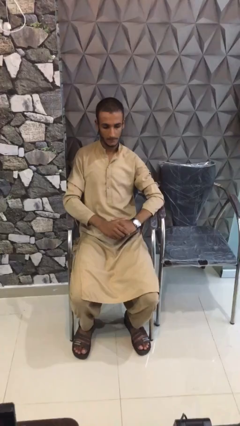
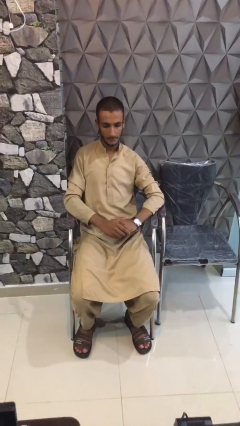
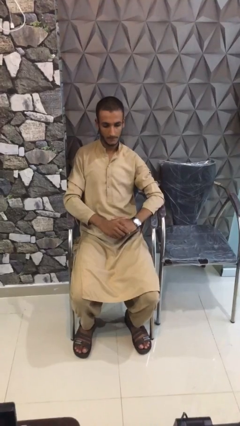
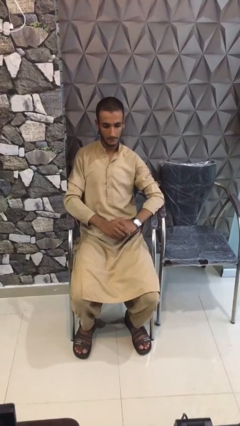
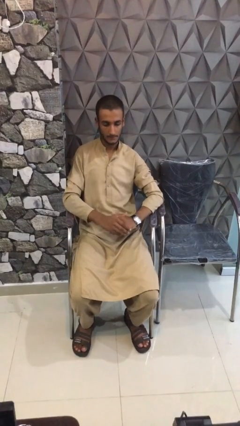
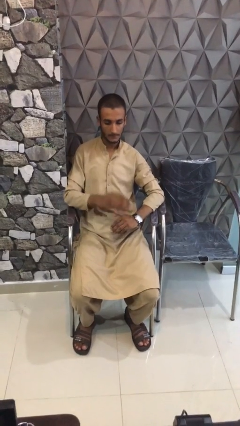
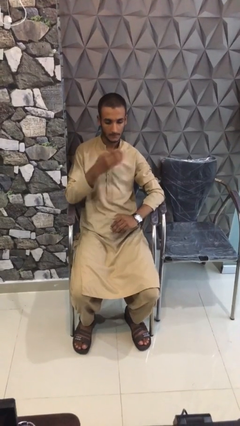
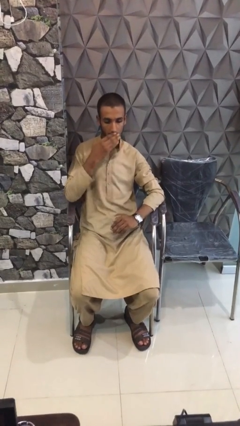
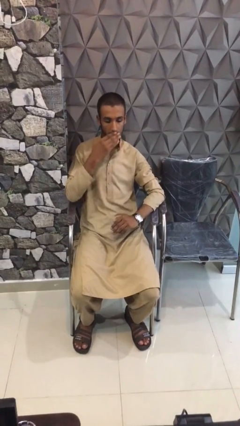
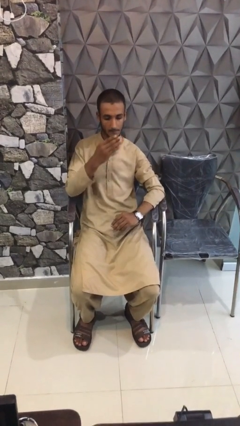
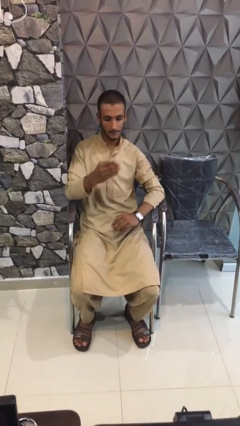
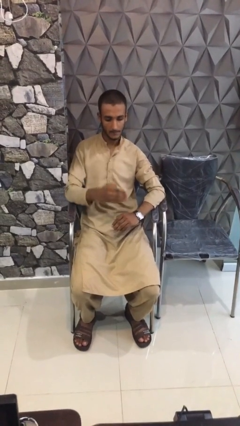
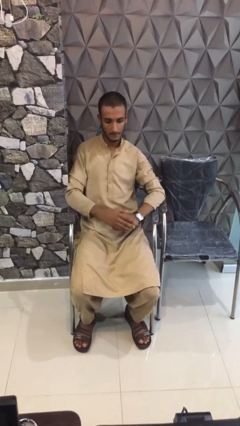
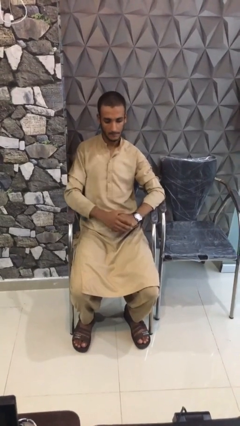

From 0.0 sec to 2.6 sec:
person gestures blow kiss

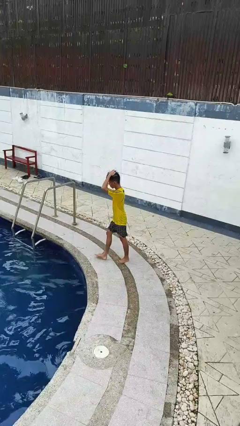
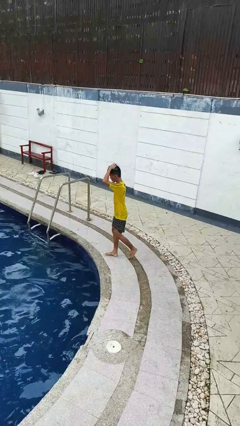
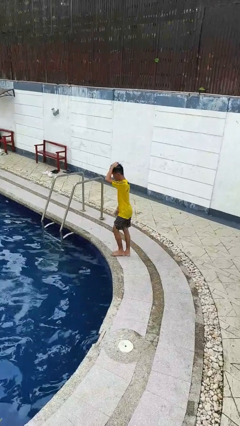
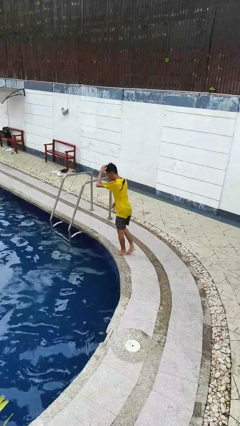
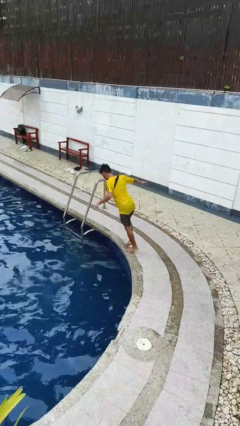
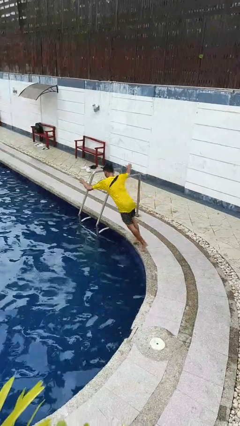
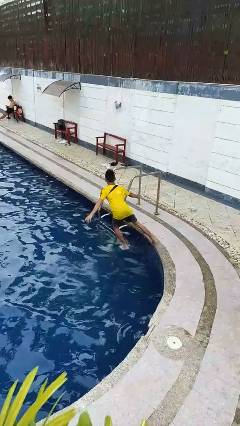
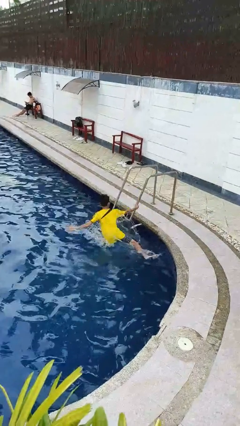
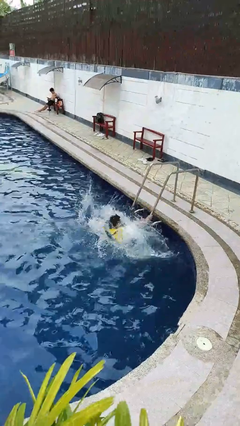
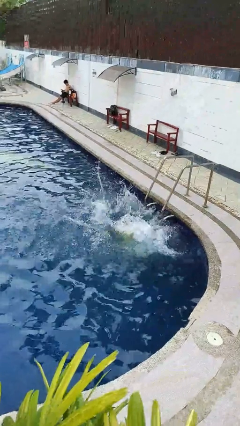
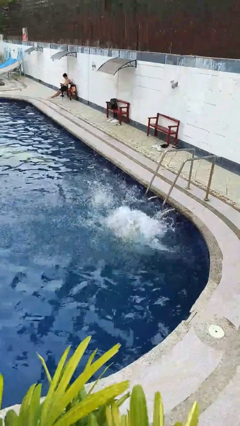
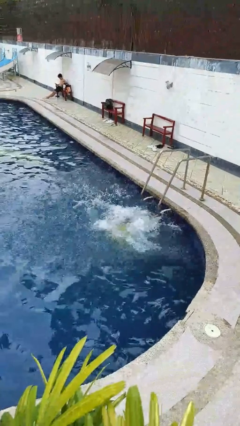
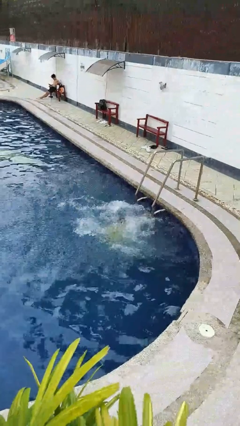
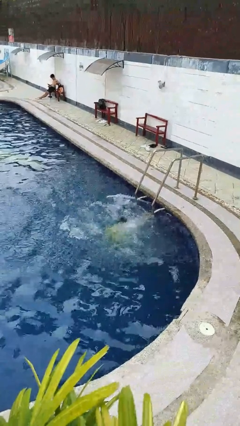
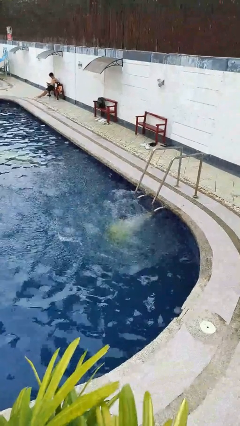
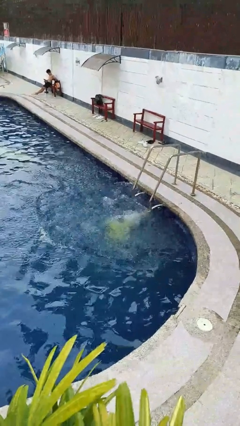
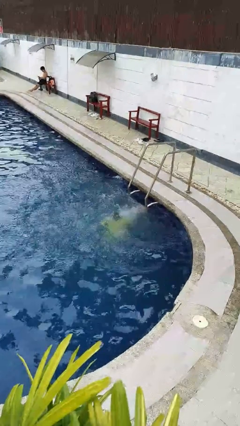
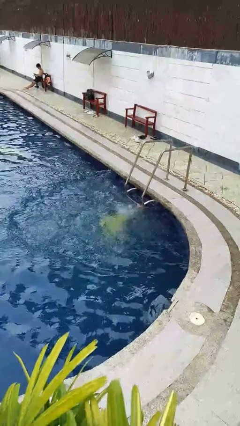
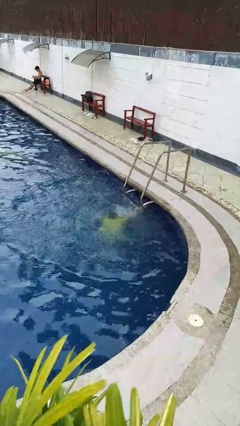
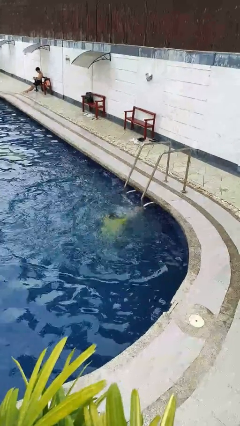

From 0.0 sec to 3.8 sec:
person falls into pool

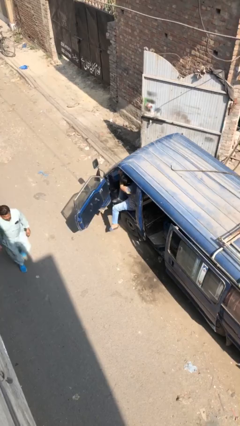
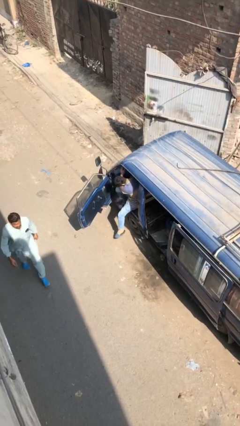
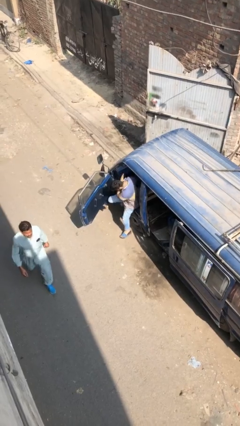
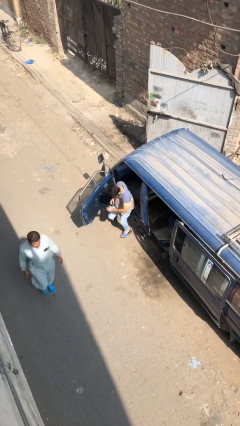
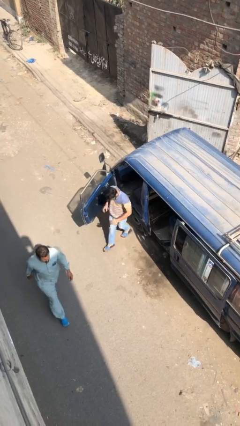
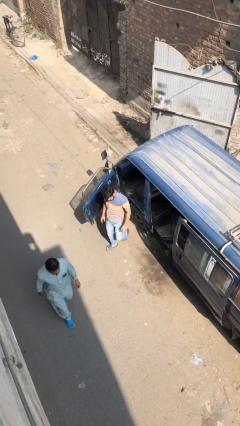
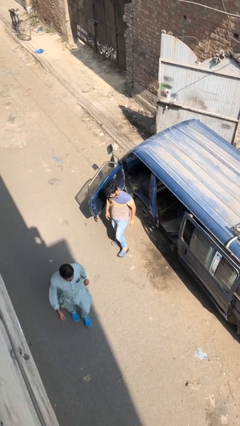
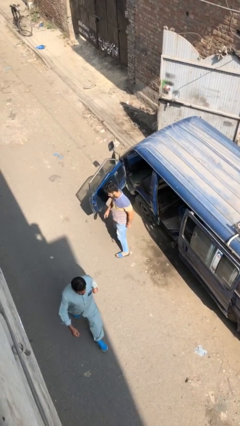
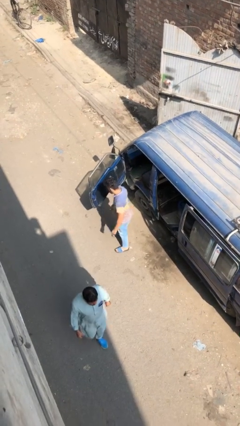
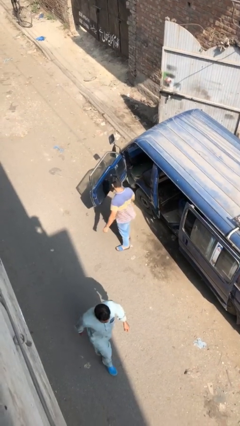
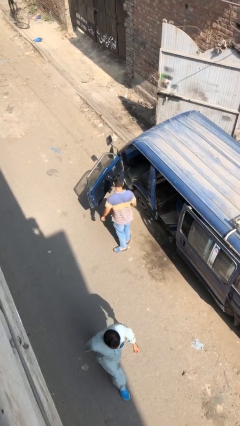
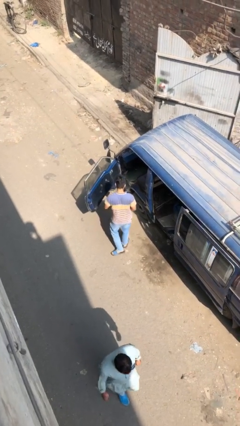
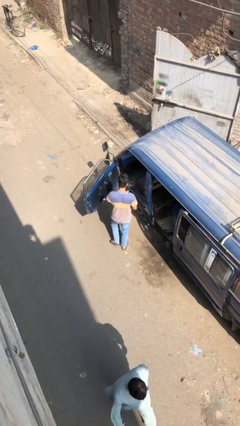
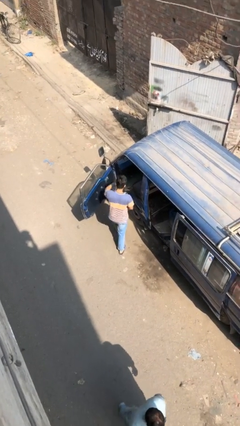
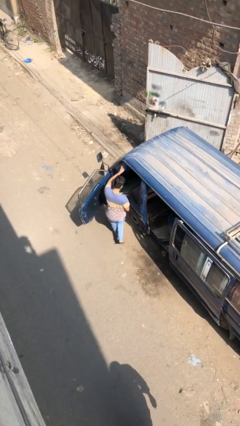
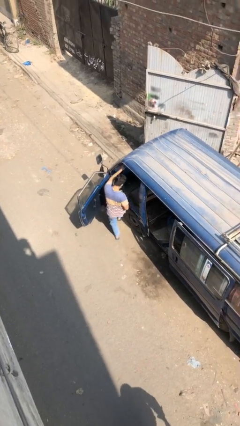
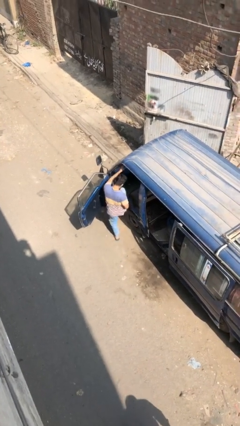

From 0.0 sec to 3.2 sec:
person exits car

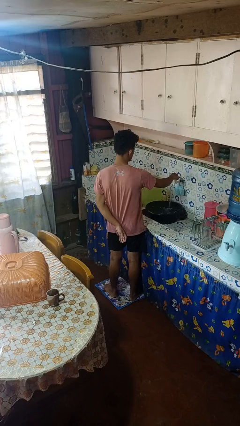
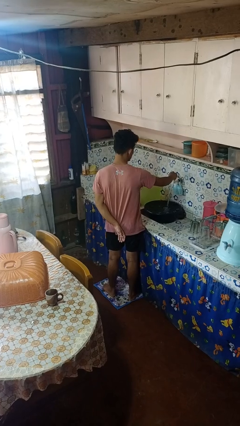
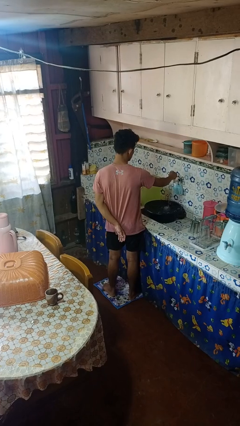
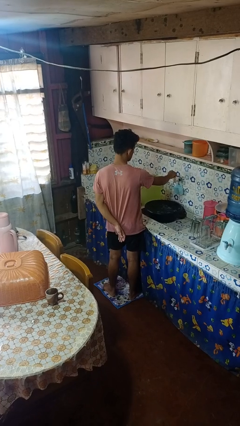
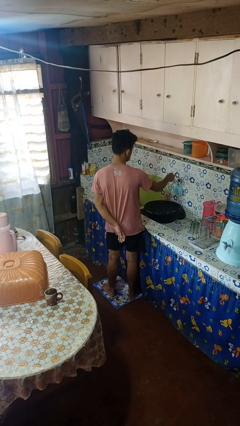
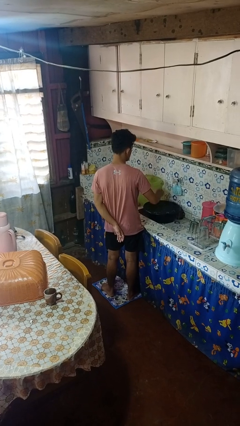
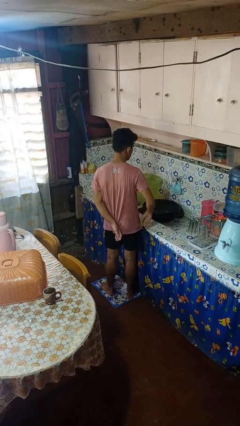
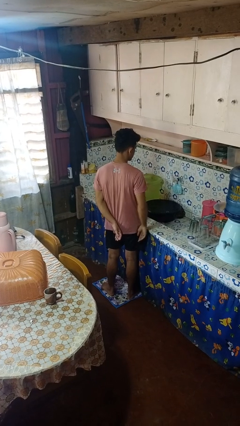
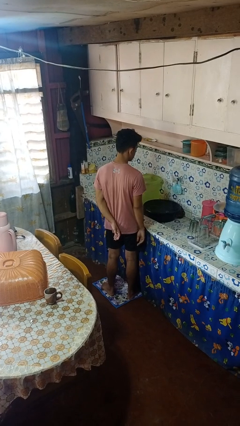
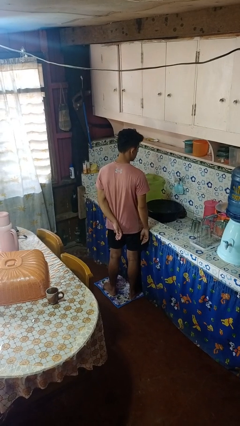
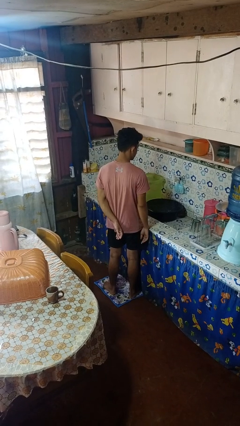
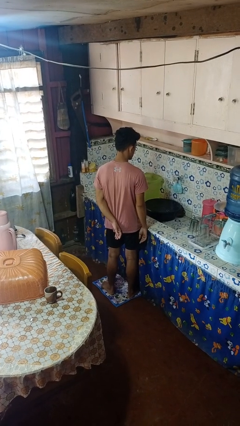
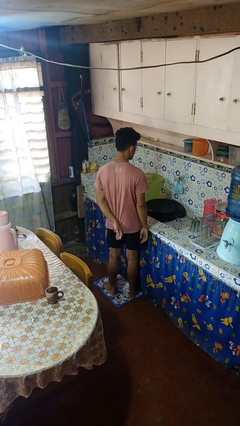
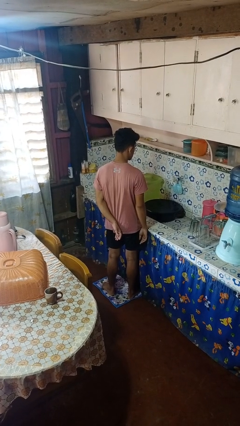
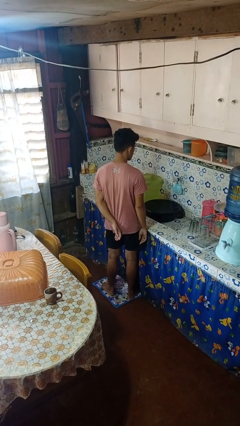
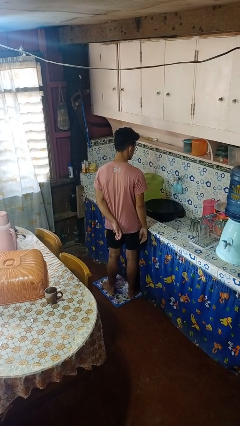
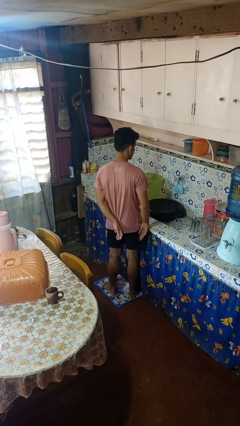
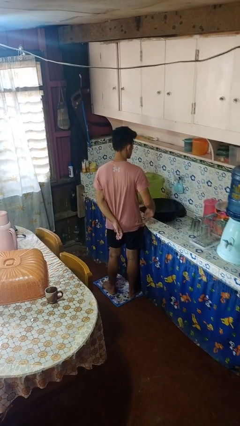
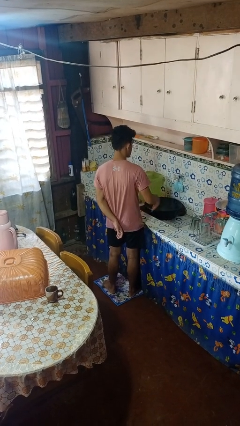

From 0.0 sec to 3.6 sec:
person turns off faucet

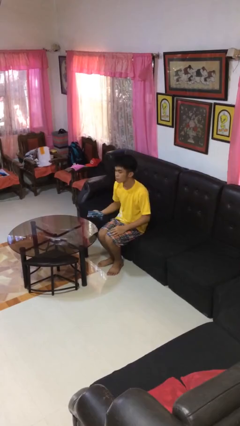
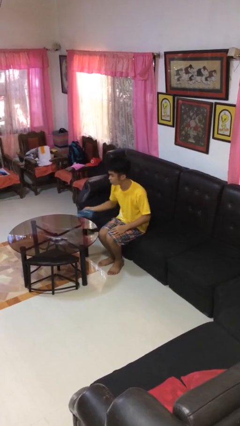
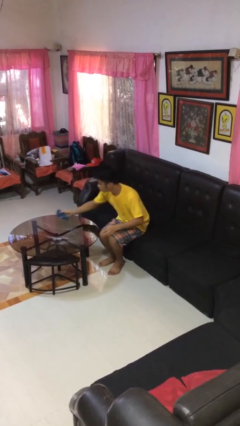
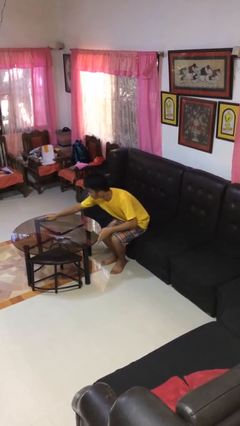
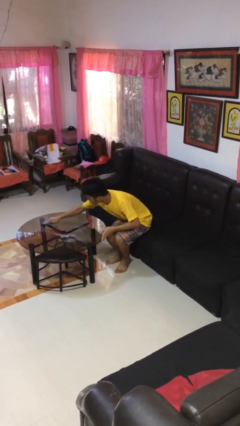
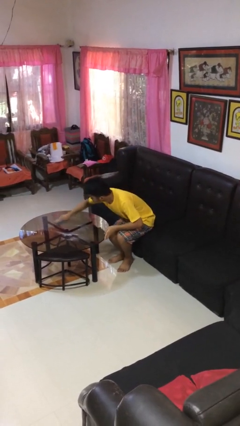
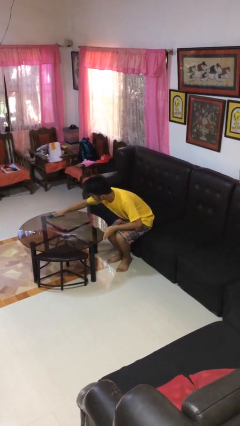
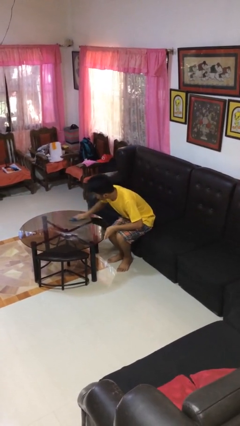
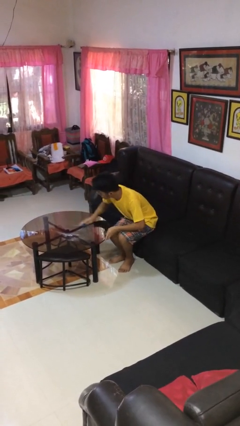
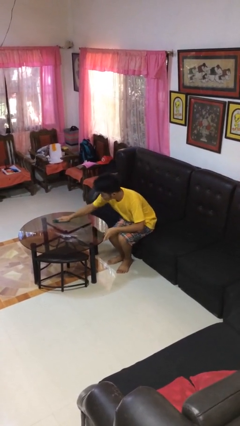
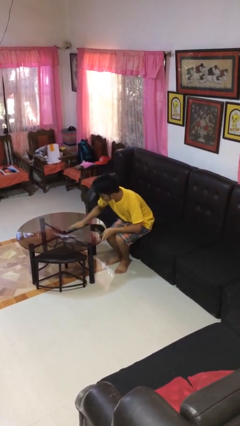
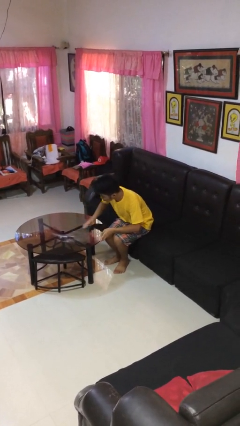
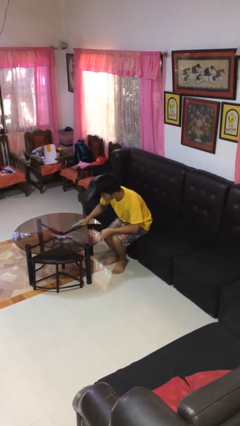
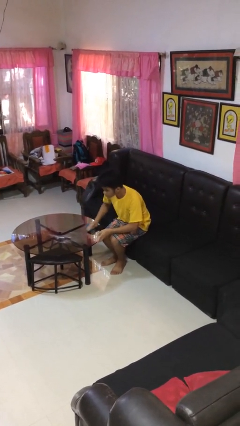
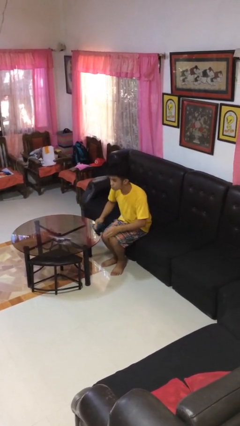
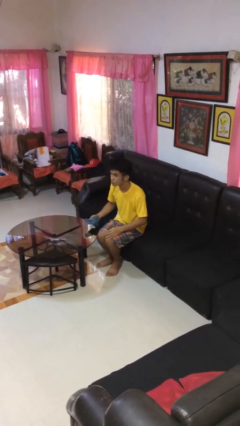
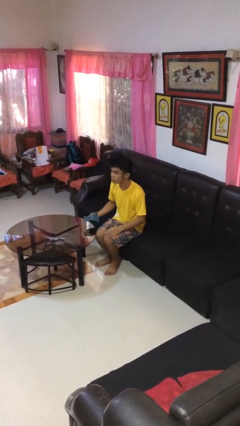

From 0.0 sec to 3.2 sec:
person cleans table with rag

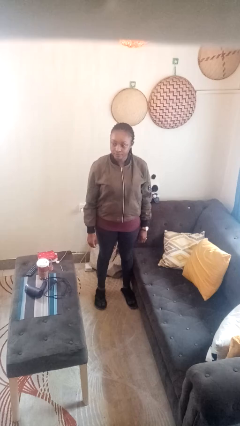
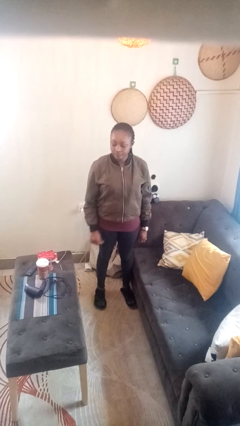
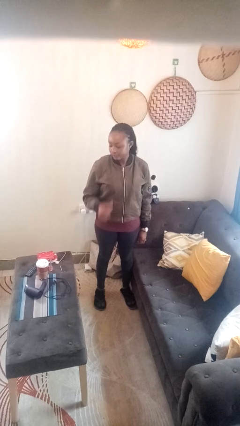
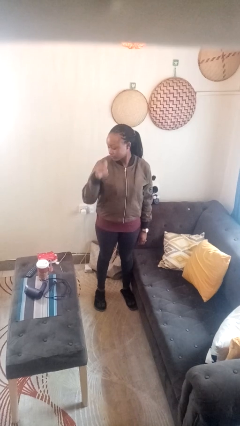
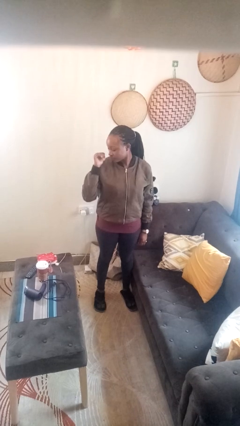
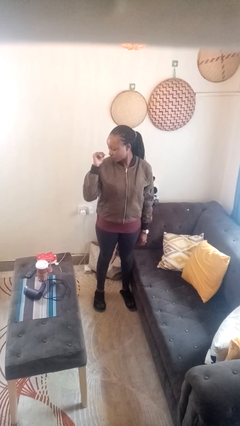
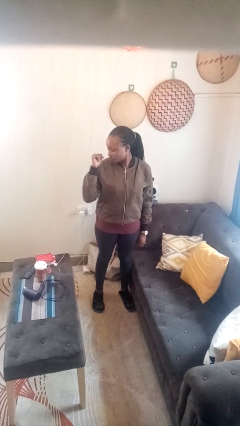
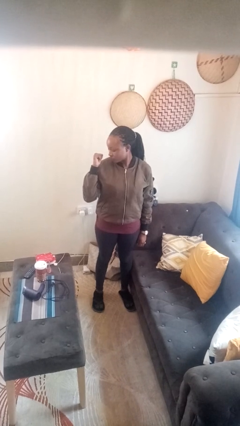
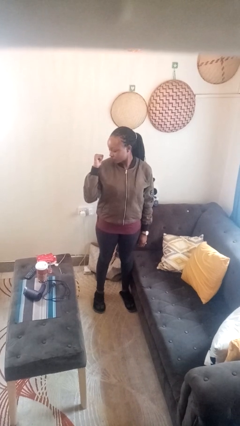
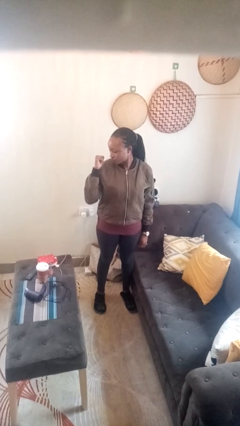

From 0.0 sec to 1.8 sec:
person gestures behind me
